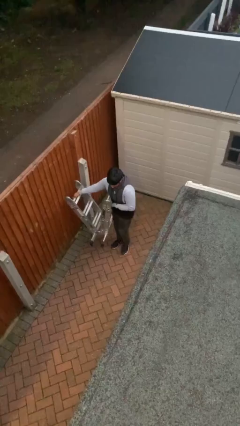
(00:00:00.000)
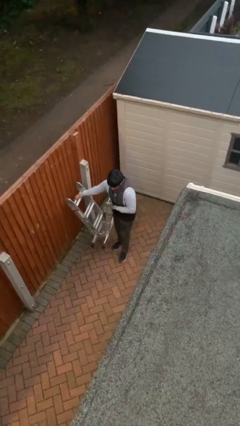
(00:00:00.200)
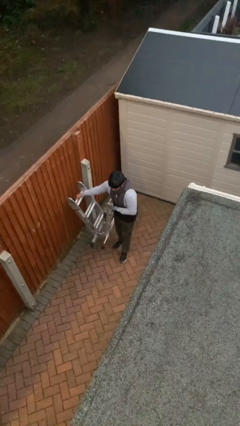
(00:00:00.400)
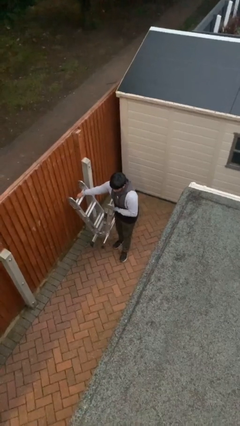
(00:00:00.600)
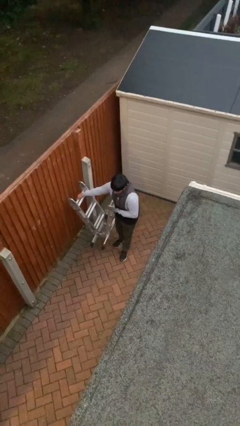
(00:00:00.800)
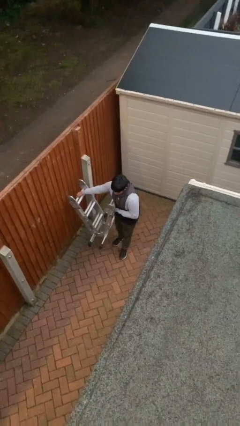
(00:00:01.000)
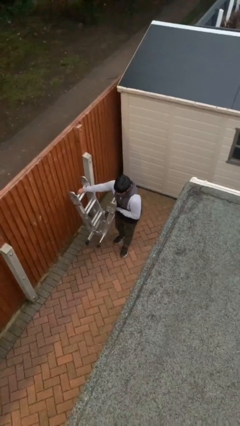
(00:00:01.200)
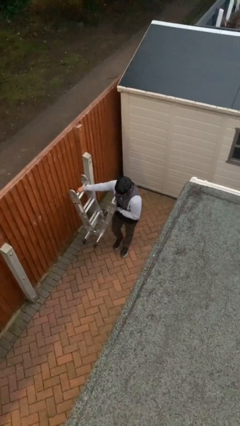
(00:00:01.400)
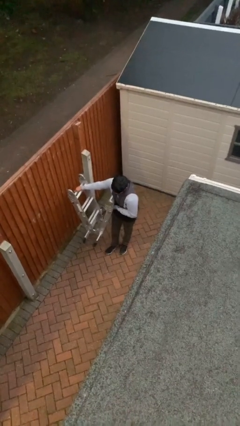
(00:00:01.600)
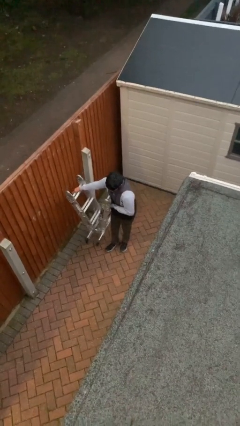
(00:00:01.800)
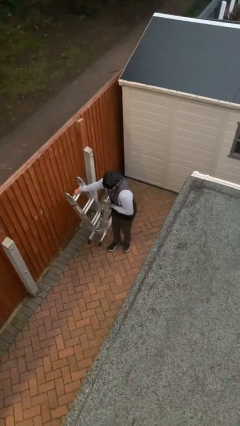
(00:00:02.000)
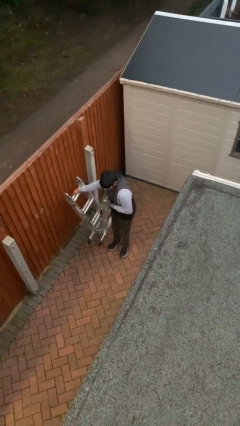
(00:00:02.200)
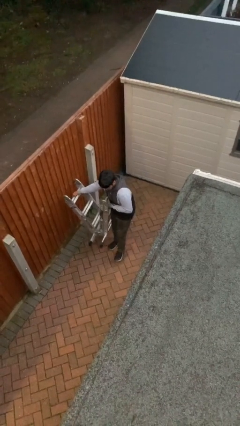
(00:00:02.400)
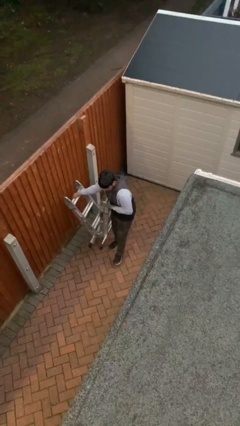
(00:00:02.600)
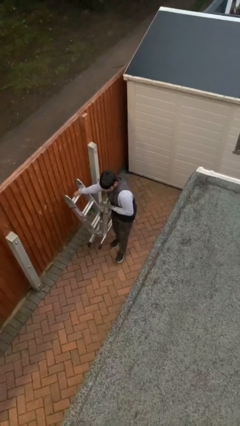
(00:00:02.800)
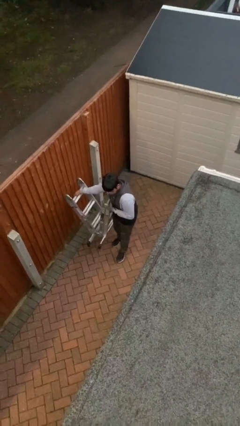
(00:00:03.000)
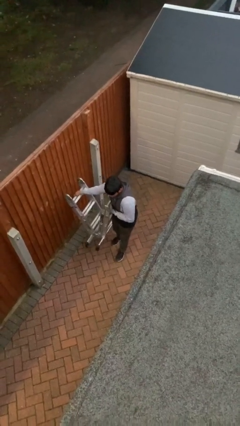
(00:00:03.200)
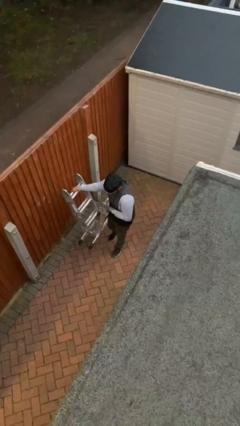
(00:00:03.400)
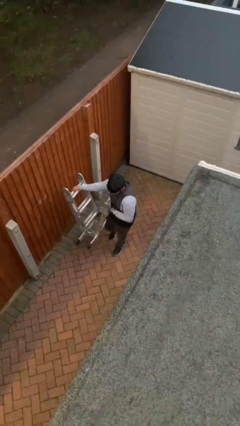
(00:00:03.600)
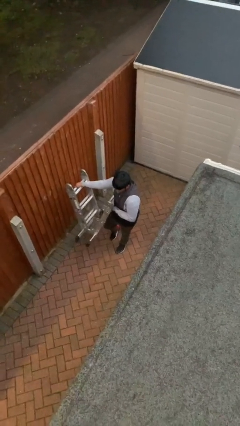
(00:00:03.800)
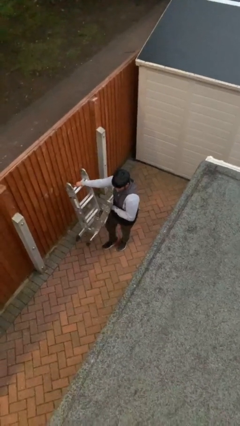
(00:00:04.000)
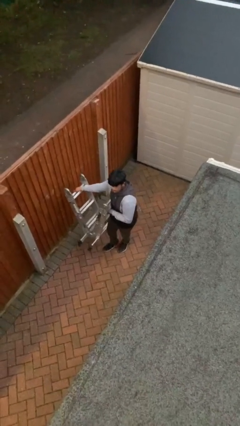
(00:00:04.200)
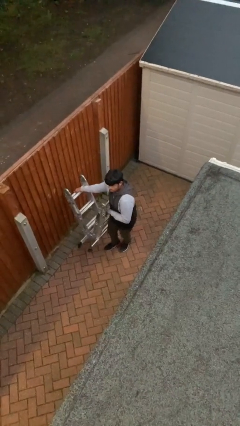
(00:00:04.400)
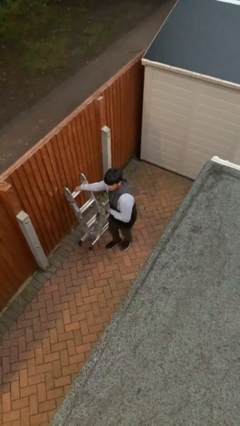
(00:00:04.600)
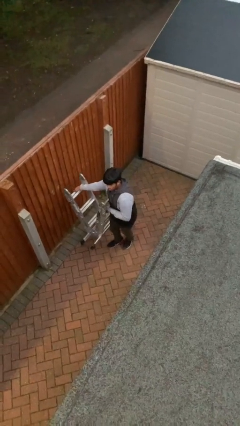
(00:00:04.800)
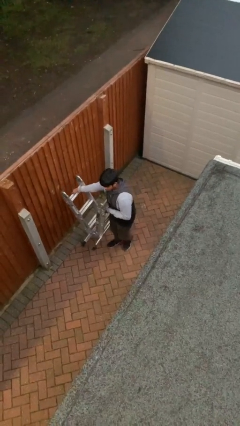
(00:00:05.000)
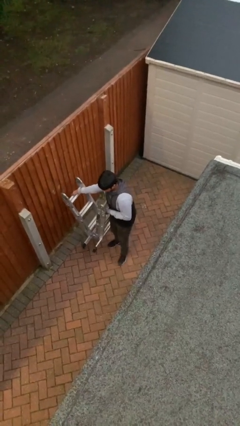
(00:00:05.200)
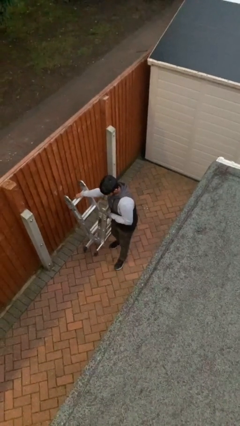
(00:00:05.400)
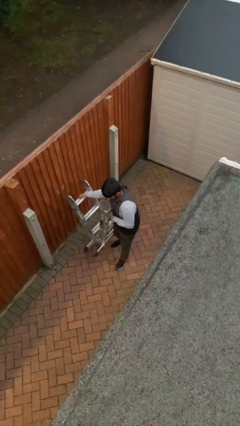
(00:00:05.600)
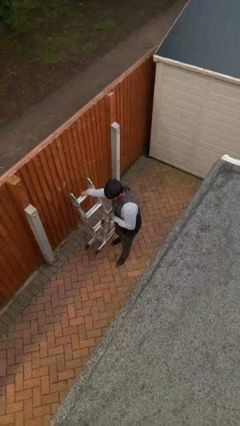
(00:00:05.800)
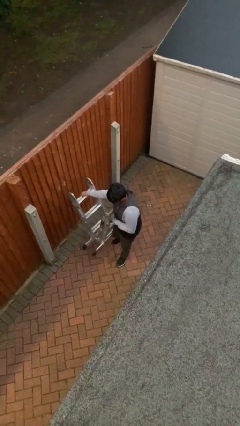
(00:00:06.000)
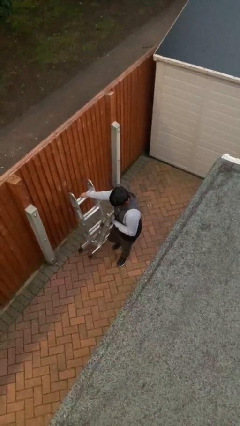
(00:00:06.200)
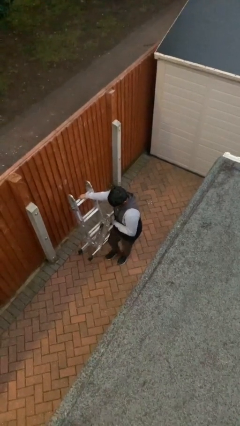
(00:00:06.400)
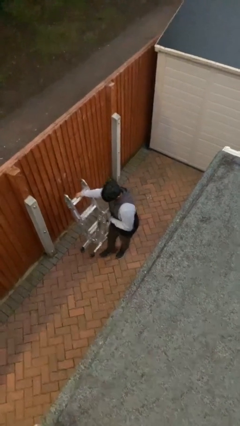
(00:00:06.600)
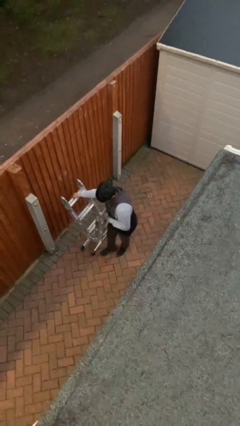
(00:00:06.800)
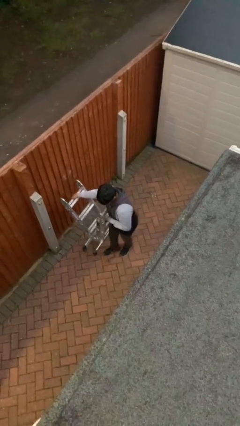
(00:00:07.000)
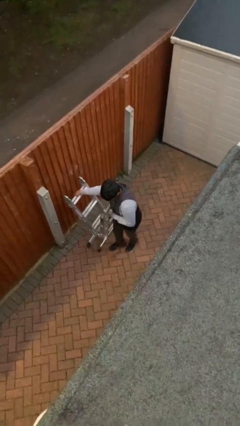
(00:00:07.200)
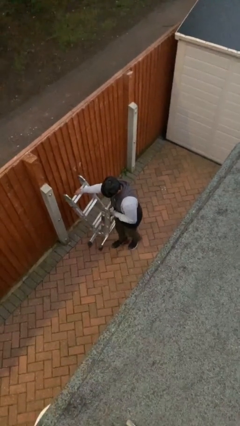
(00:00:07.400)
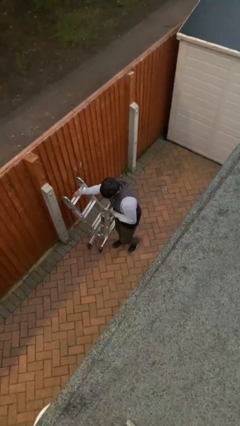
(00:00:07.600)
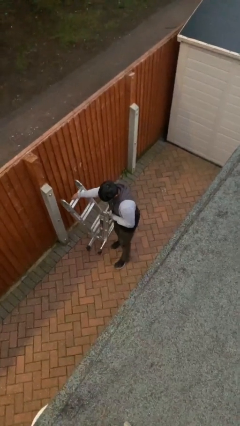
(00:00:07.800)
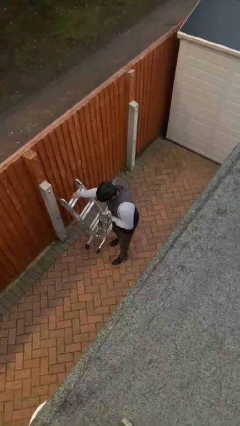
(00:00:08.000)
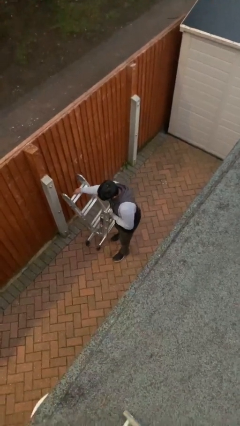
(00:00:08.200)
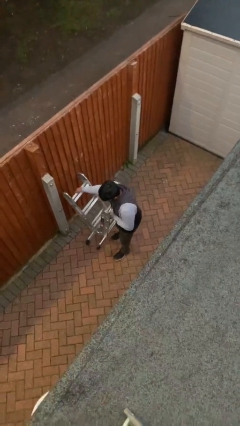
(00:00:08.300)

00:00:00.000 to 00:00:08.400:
person carries heavy object

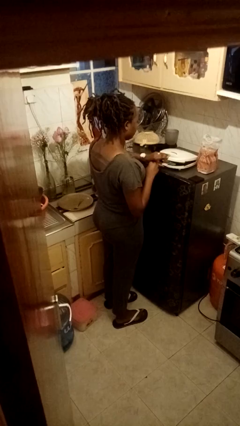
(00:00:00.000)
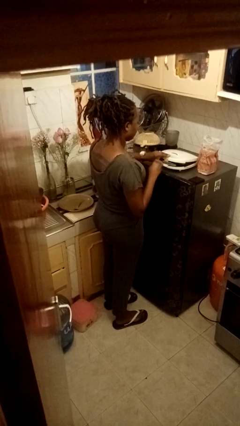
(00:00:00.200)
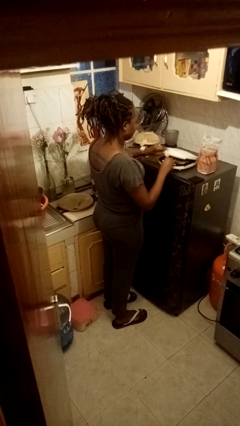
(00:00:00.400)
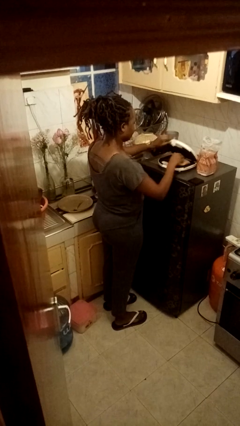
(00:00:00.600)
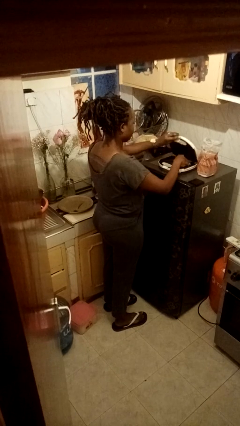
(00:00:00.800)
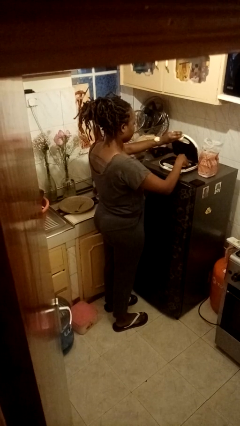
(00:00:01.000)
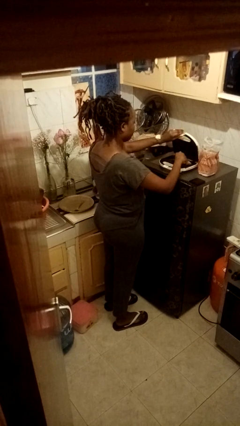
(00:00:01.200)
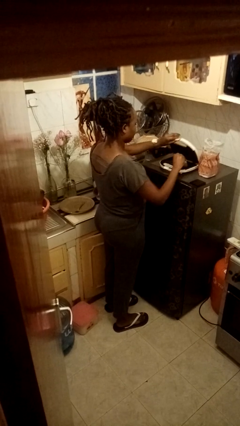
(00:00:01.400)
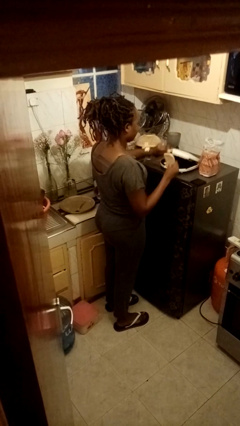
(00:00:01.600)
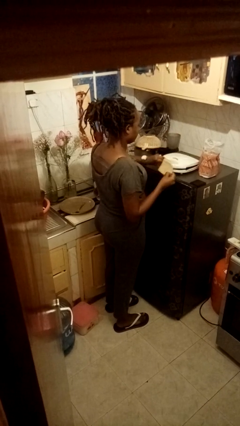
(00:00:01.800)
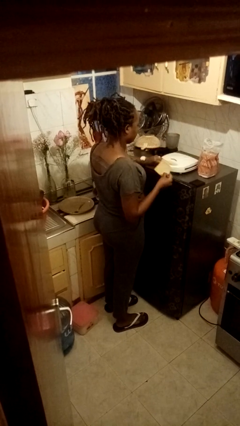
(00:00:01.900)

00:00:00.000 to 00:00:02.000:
person takes object from toaster

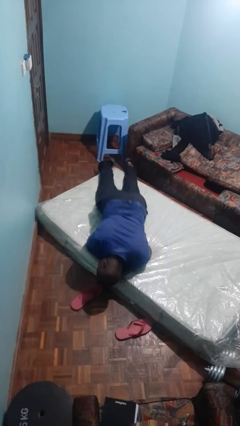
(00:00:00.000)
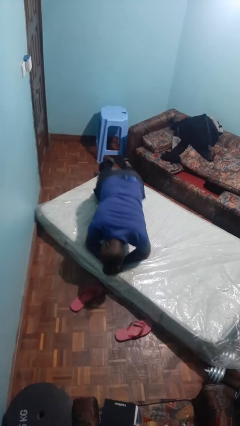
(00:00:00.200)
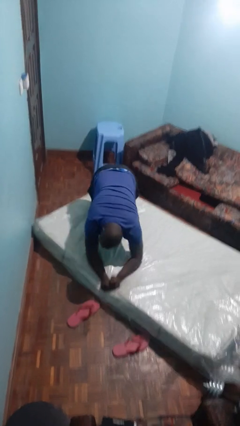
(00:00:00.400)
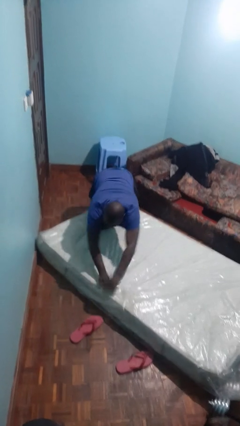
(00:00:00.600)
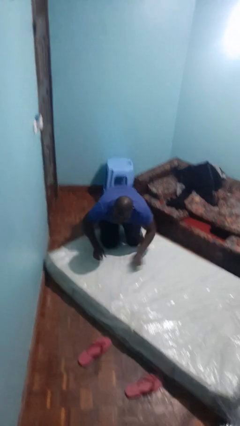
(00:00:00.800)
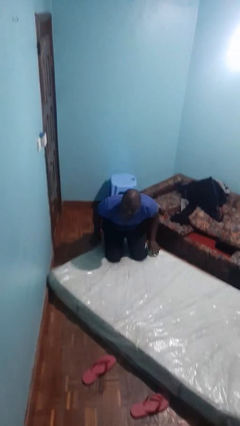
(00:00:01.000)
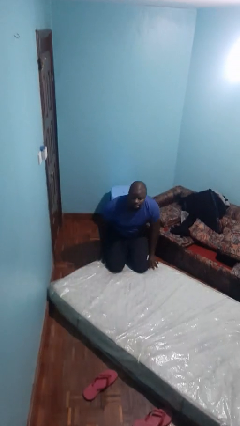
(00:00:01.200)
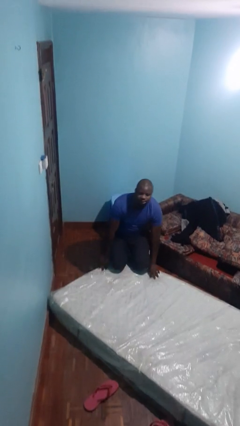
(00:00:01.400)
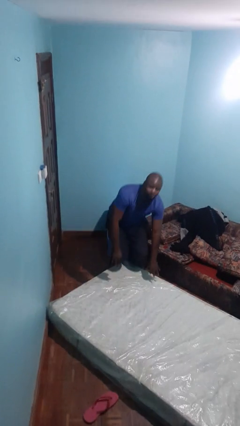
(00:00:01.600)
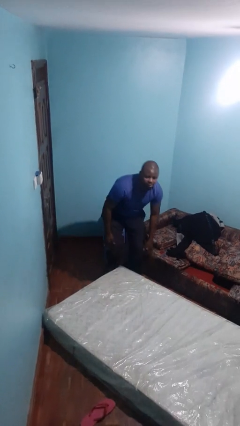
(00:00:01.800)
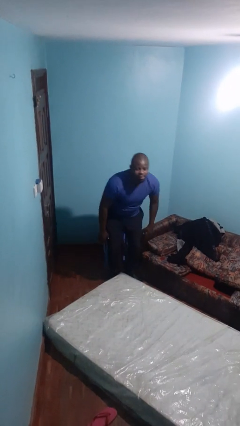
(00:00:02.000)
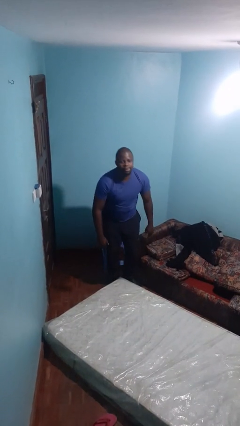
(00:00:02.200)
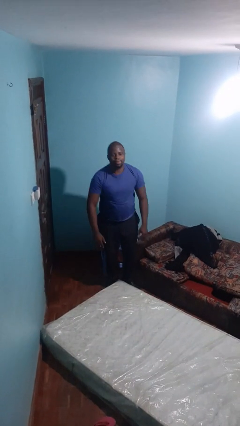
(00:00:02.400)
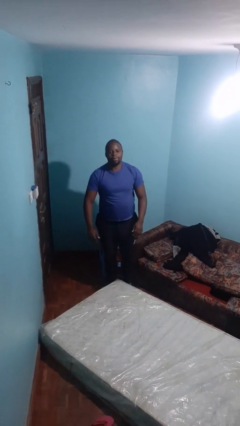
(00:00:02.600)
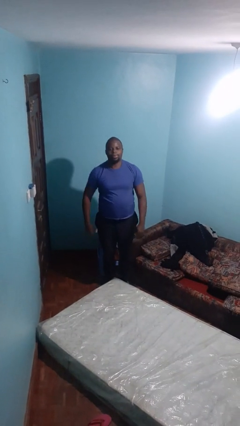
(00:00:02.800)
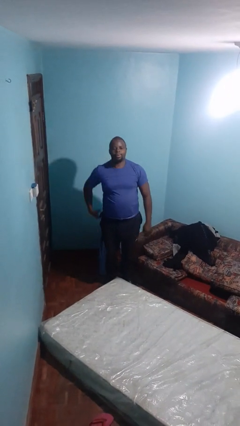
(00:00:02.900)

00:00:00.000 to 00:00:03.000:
person stands up

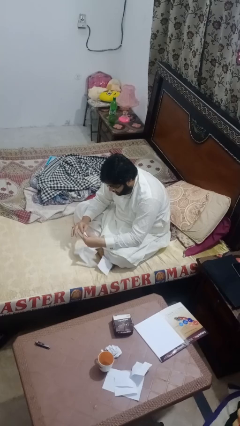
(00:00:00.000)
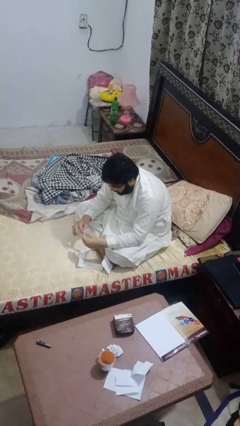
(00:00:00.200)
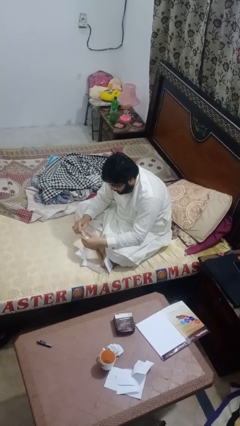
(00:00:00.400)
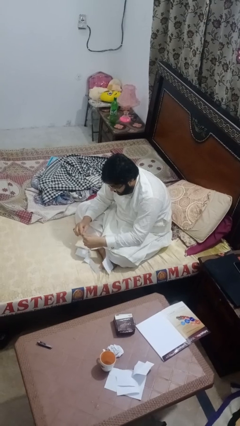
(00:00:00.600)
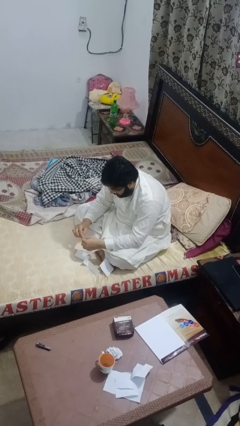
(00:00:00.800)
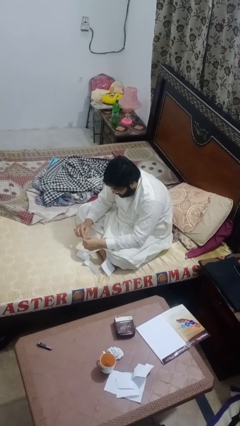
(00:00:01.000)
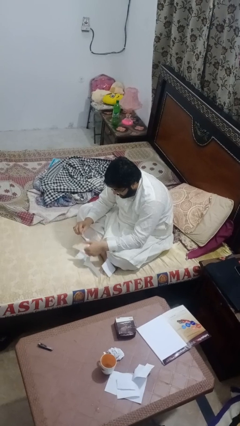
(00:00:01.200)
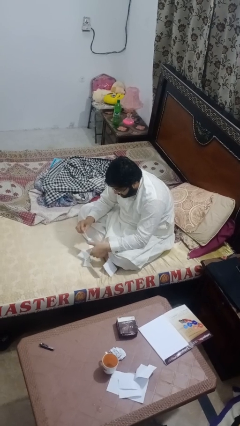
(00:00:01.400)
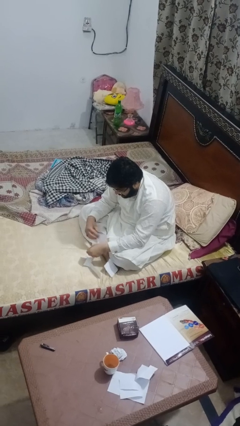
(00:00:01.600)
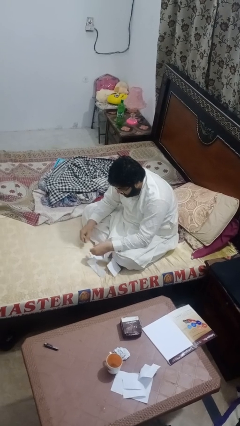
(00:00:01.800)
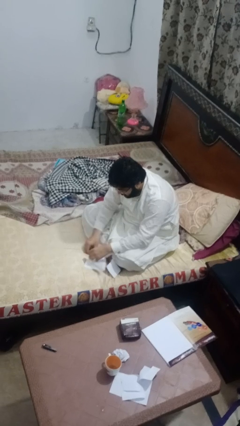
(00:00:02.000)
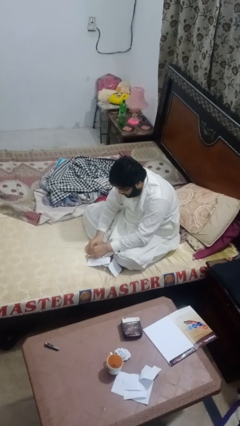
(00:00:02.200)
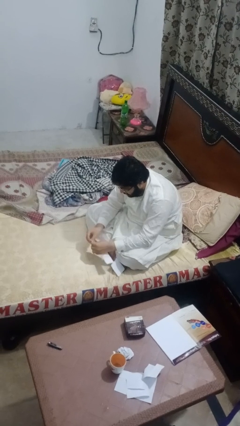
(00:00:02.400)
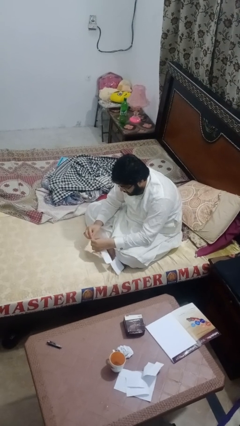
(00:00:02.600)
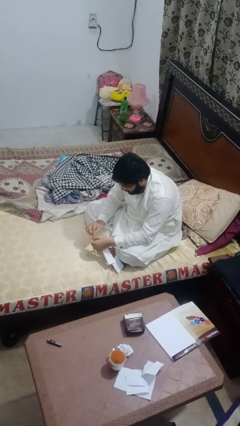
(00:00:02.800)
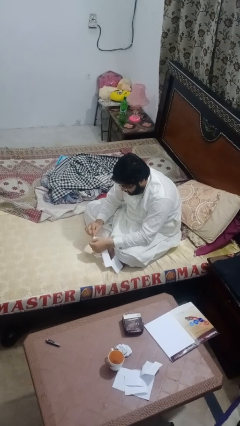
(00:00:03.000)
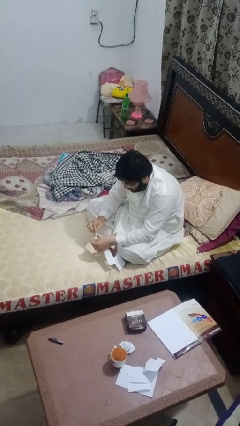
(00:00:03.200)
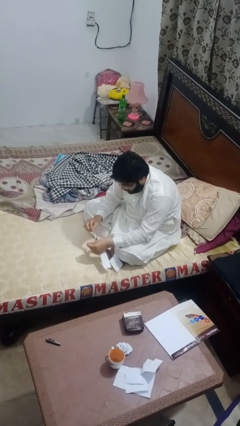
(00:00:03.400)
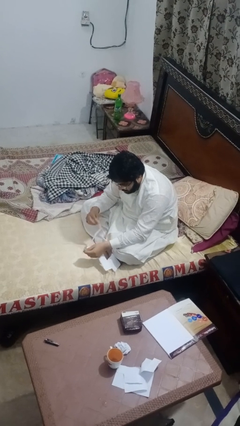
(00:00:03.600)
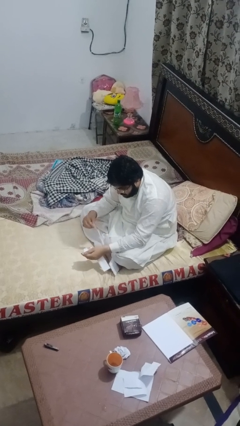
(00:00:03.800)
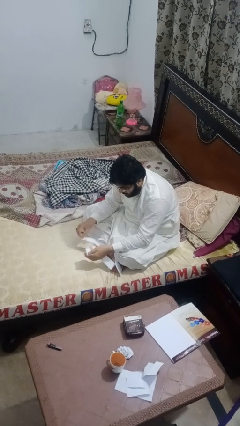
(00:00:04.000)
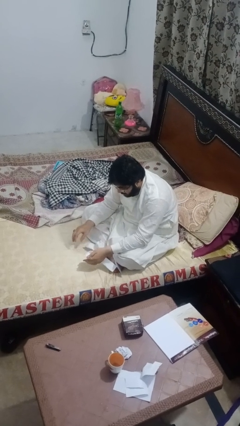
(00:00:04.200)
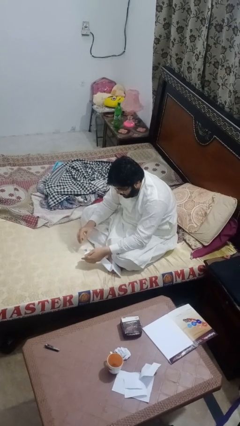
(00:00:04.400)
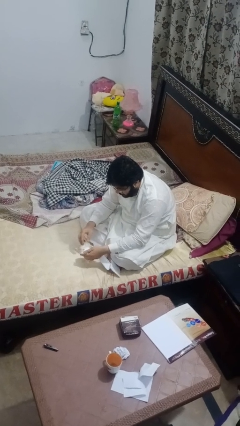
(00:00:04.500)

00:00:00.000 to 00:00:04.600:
person tears paper
